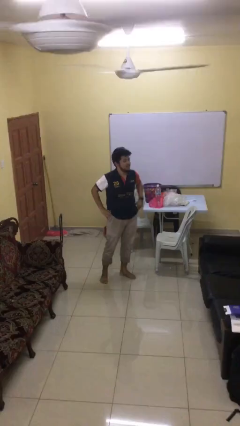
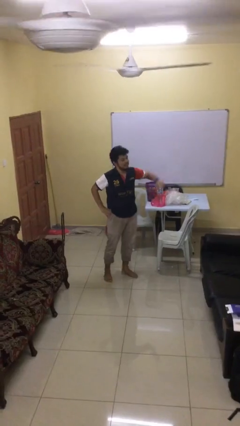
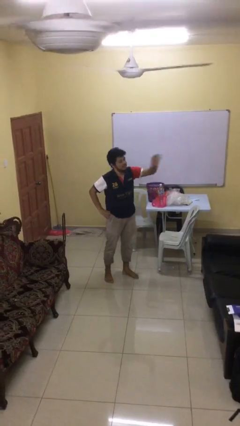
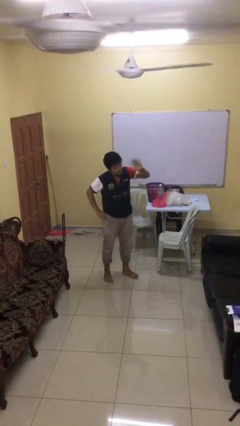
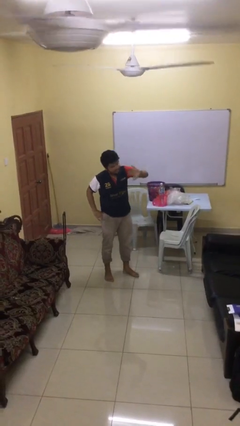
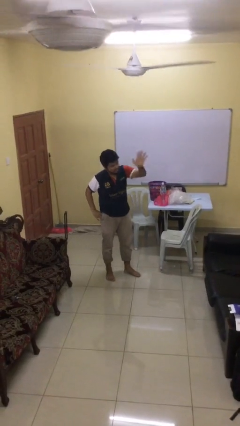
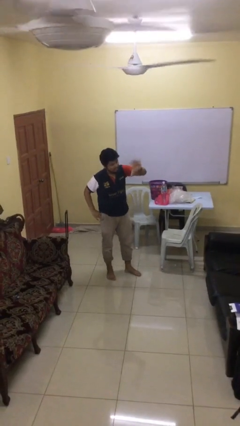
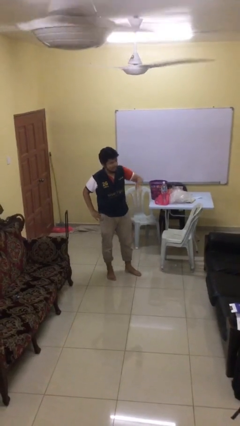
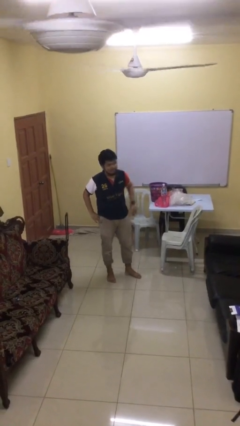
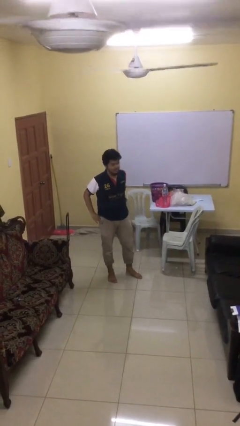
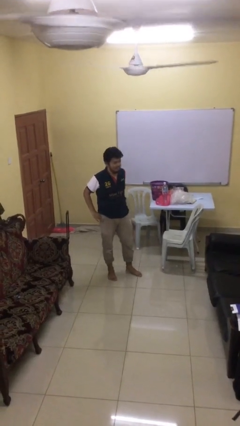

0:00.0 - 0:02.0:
person waves at person

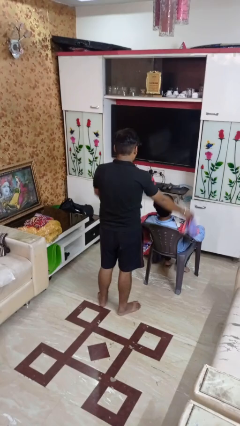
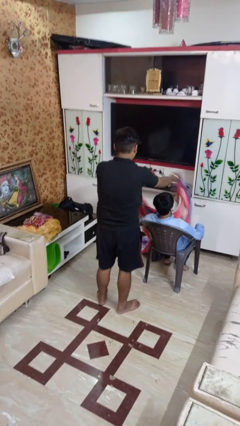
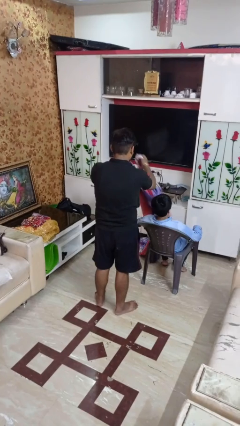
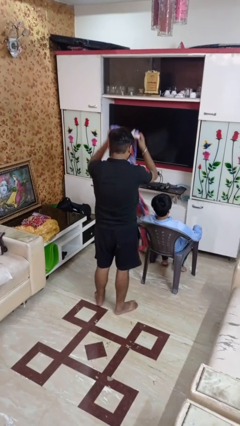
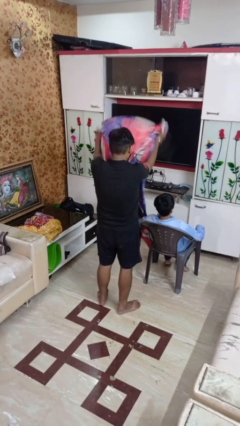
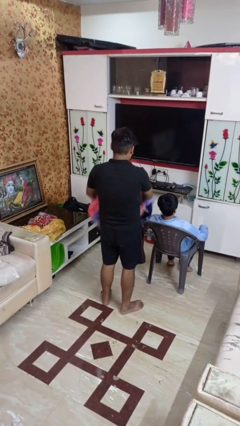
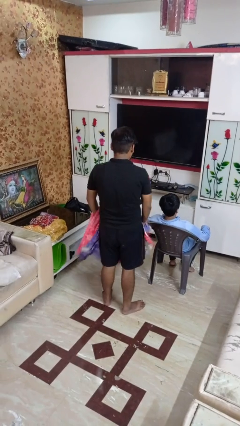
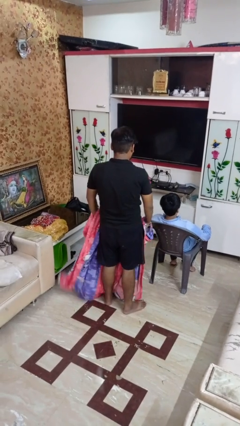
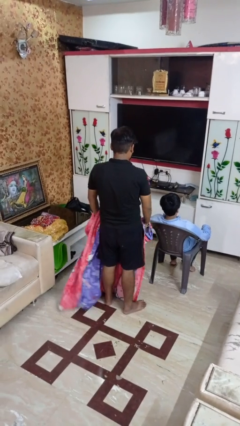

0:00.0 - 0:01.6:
person uncovers friend with blanket

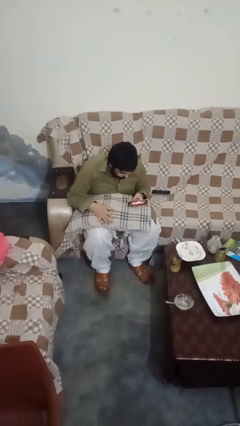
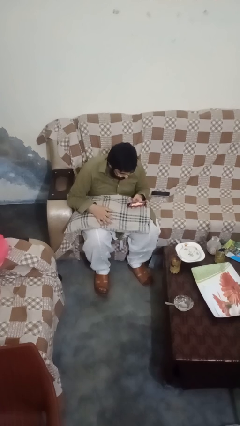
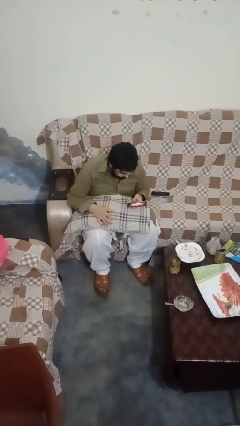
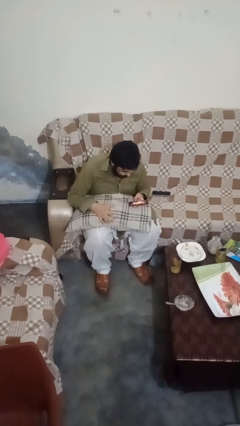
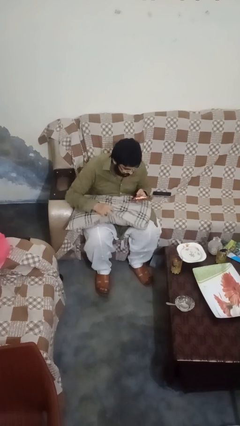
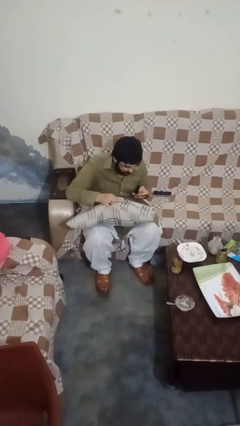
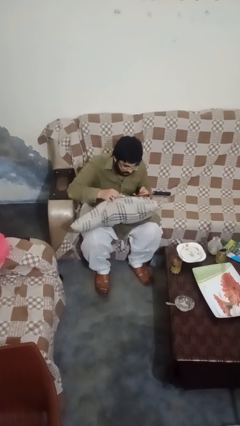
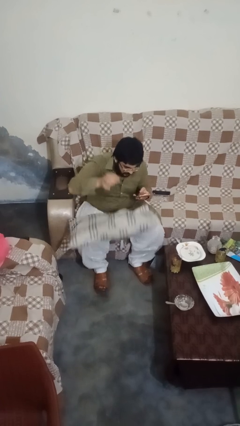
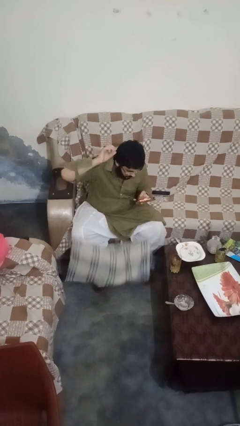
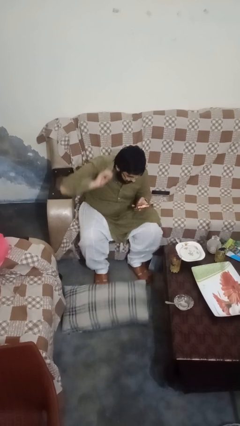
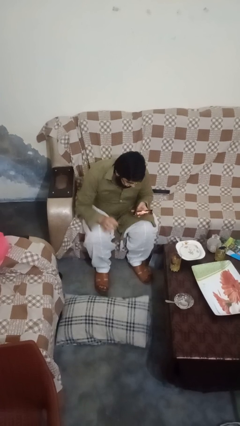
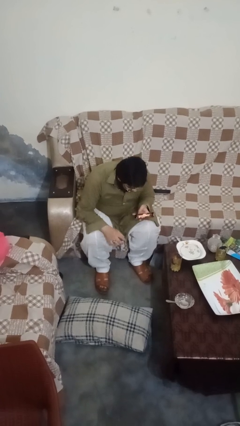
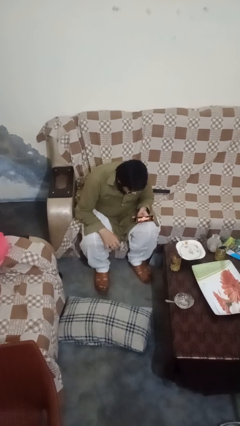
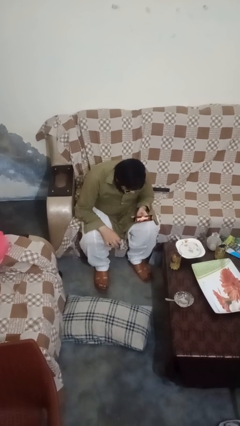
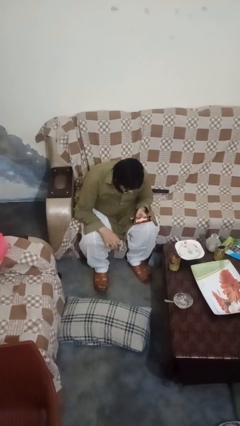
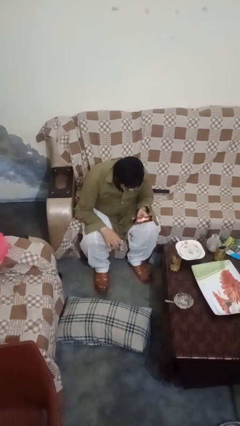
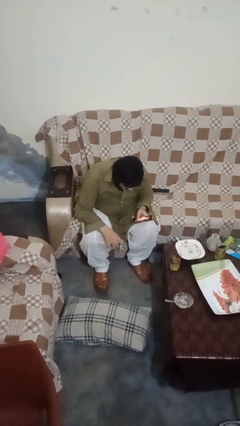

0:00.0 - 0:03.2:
person drops object

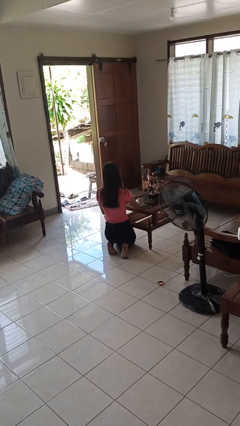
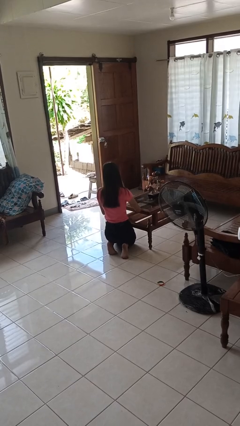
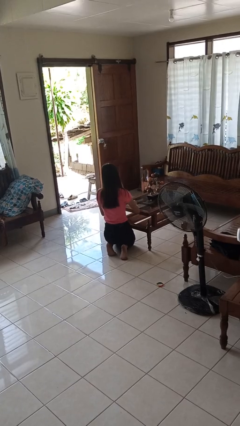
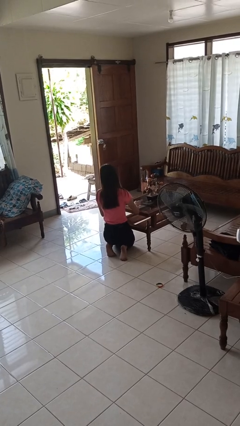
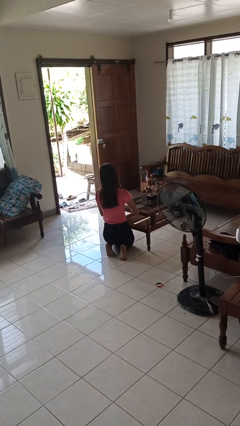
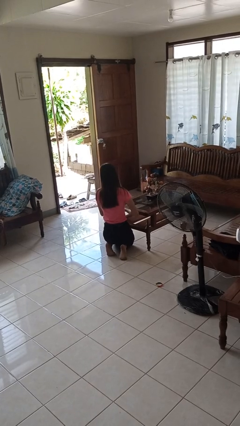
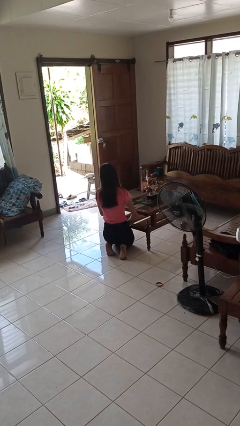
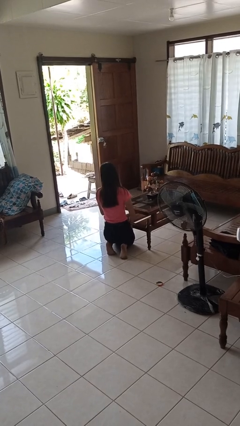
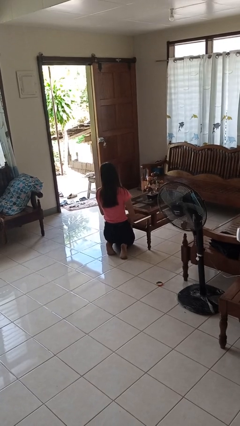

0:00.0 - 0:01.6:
person cleans table with rag

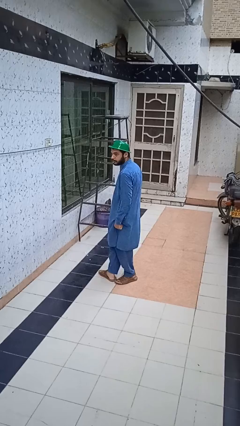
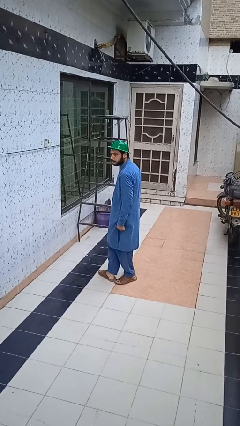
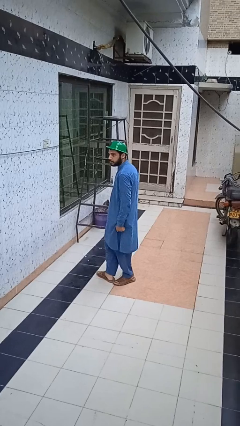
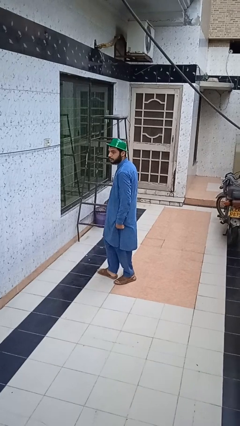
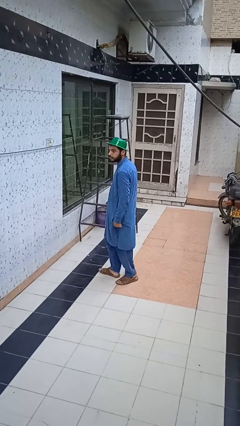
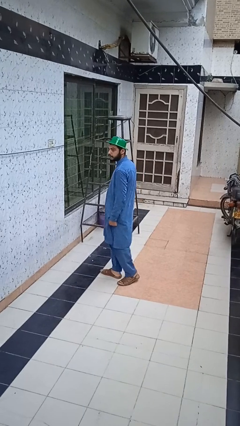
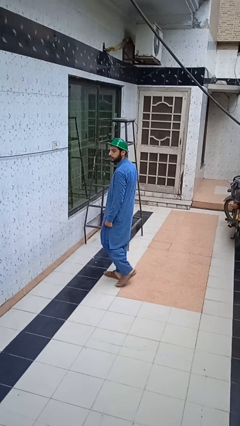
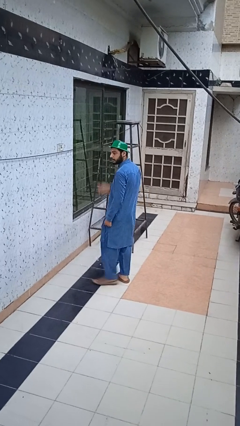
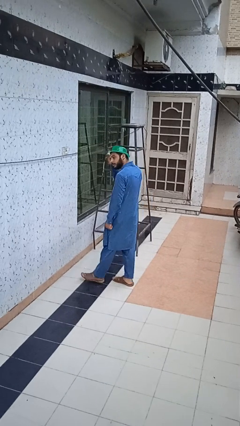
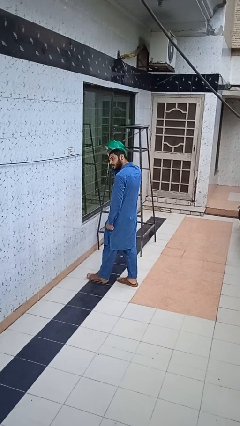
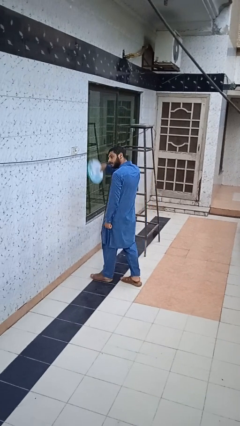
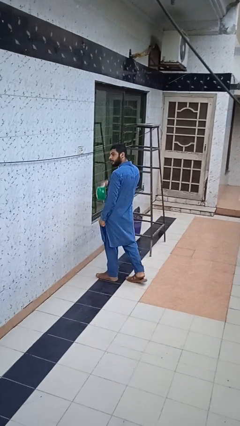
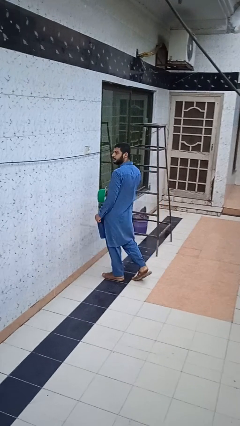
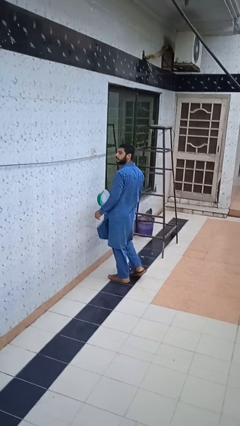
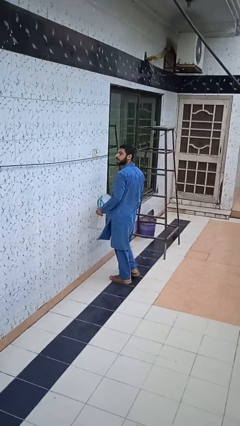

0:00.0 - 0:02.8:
person takes off hat

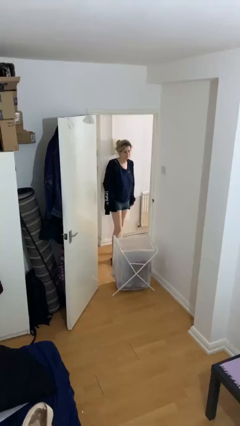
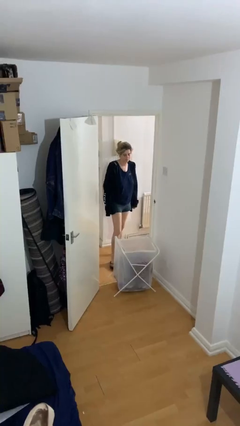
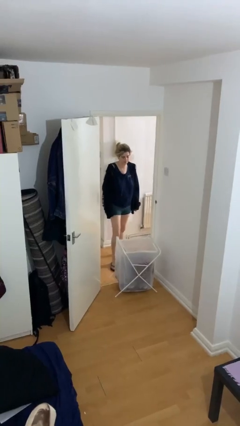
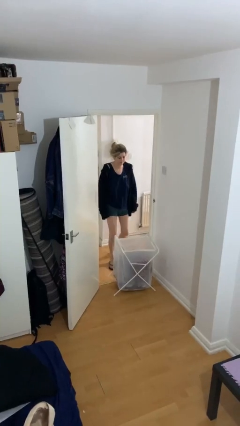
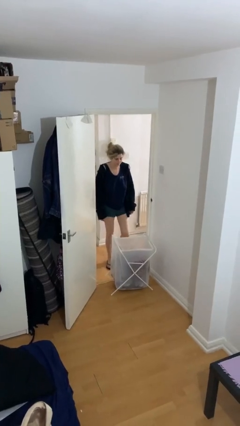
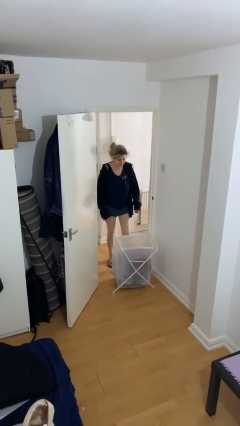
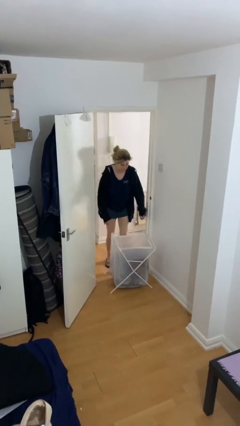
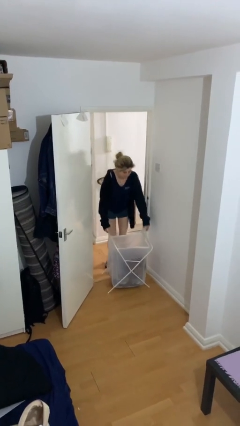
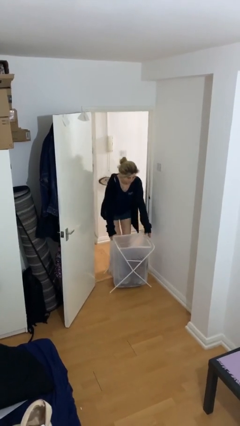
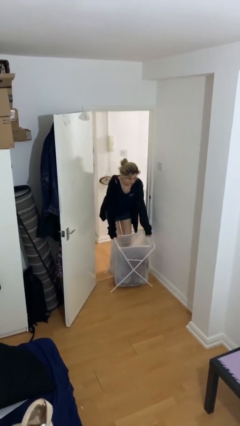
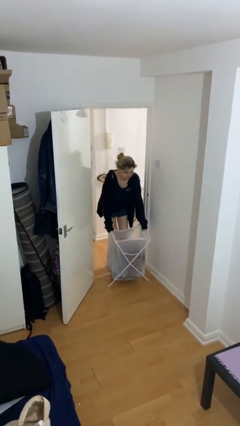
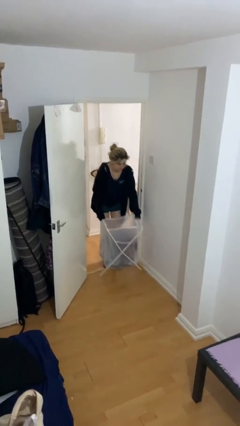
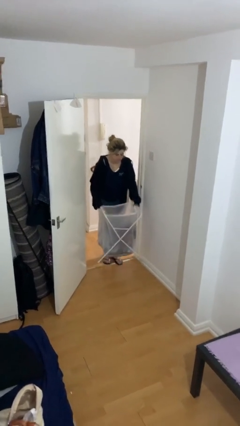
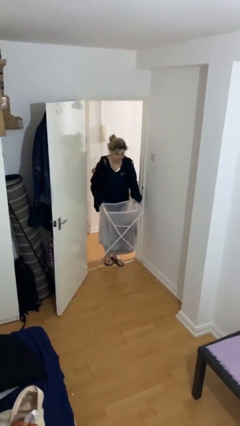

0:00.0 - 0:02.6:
person picks up object from floor

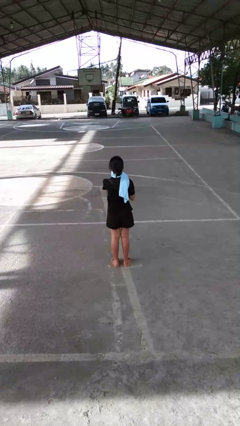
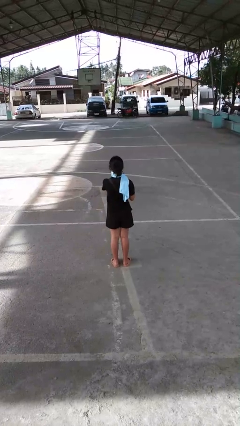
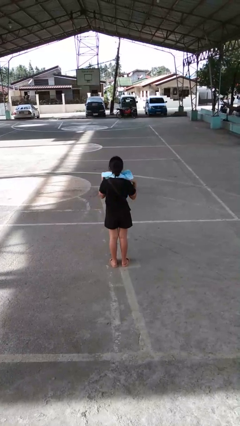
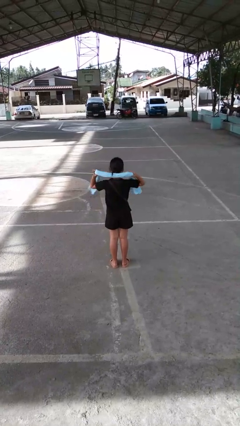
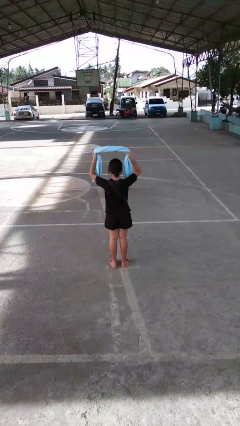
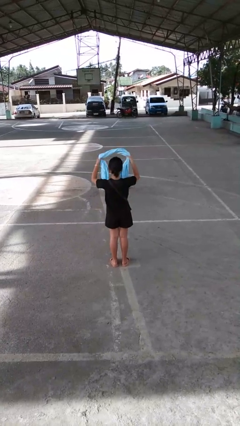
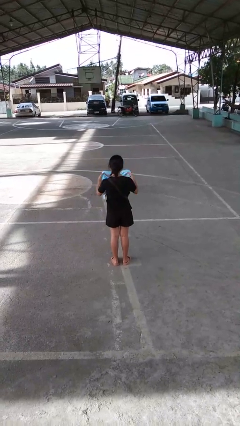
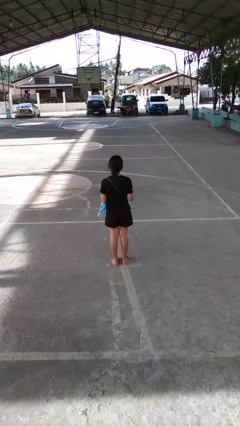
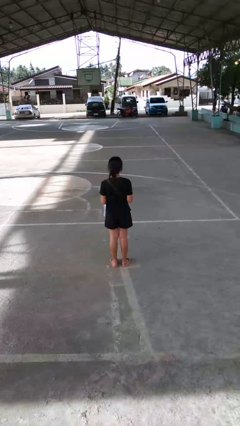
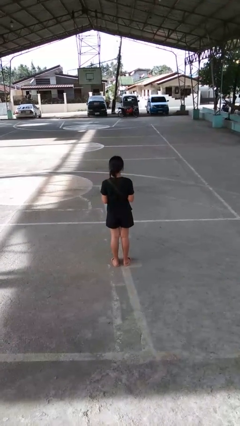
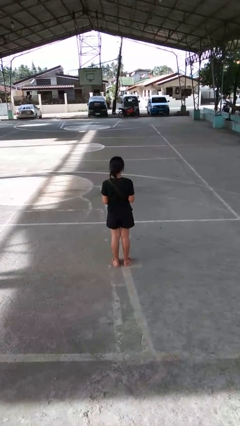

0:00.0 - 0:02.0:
person takes off scarf

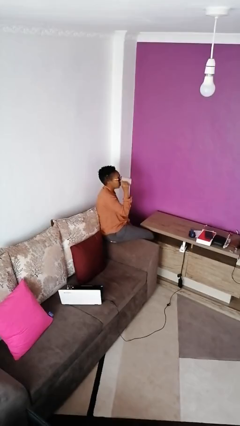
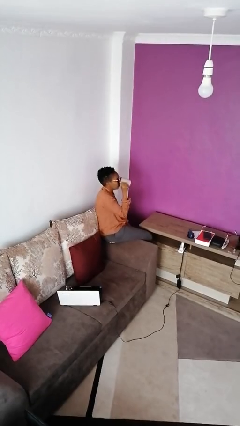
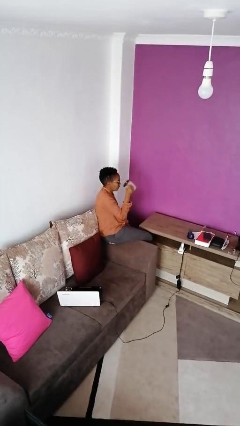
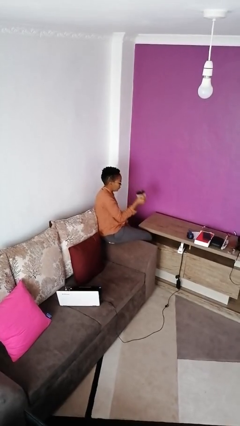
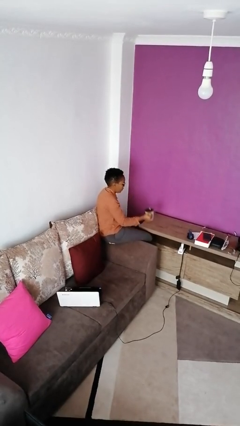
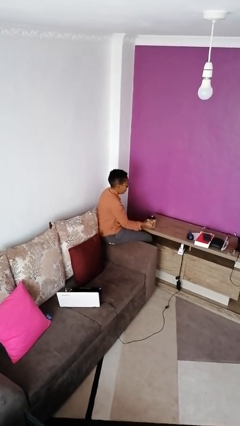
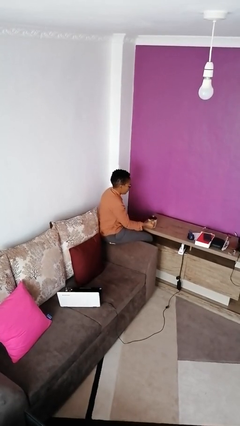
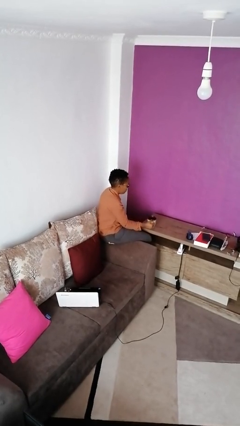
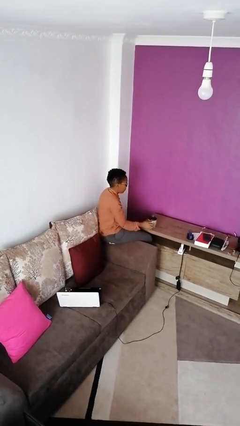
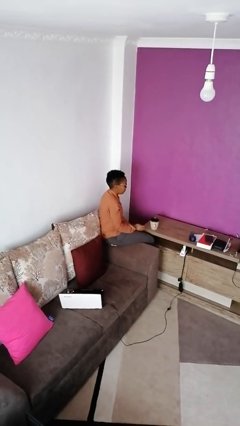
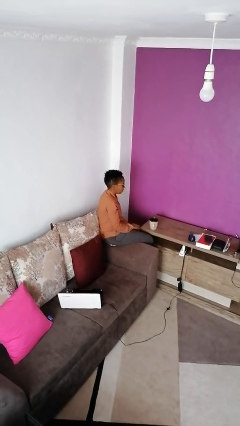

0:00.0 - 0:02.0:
person puts down object on table
